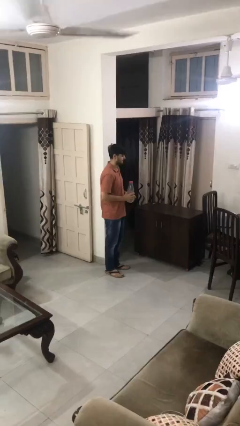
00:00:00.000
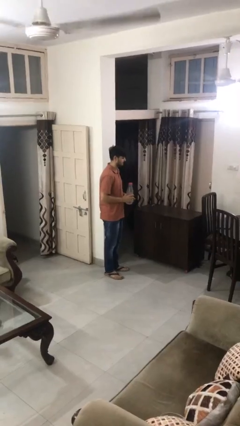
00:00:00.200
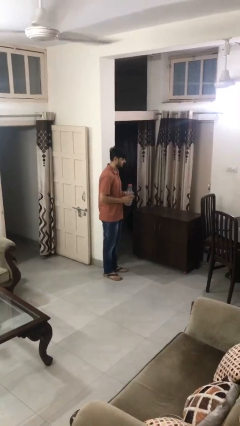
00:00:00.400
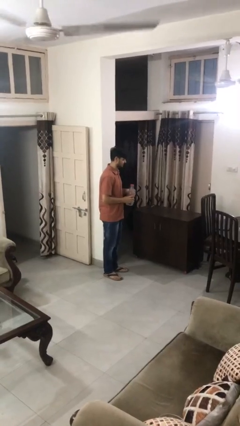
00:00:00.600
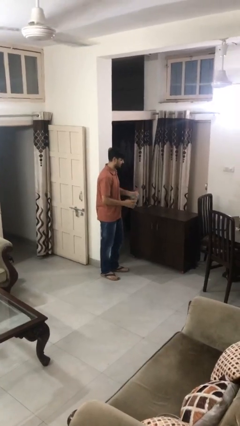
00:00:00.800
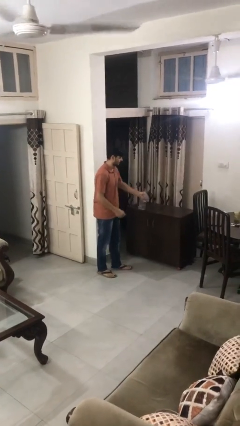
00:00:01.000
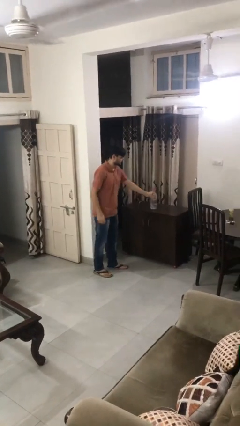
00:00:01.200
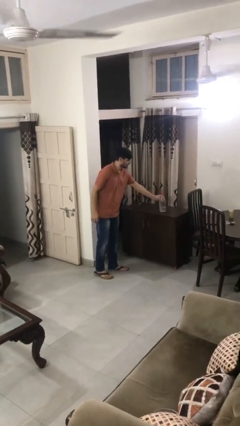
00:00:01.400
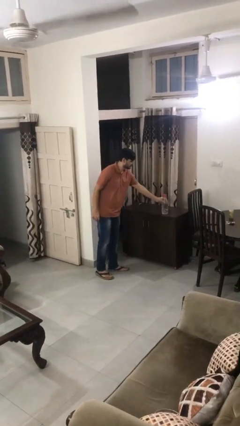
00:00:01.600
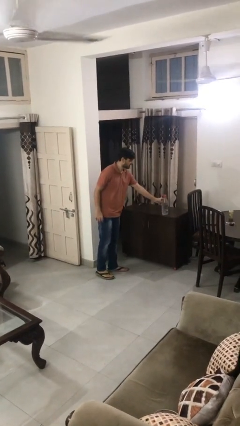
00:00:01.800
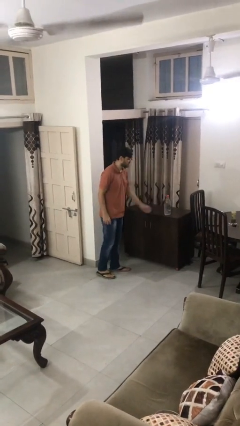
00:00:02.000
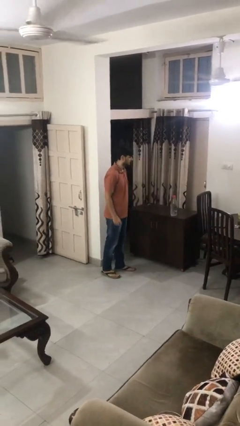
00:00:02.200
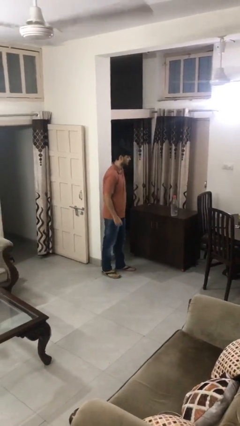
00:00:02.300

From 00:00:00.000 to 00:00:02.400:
person puts down object on countertop

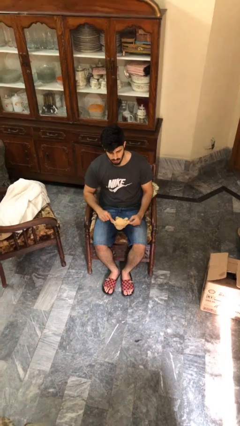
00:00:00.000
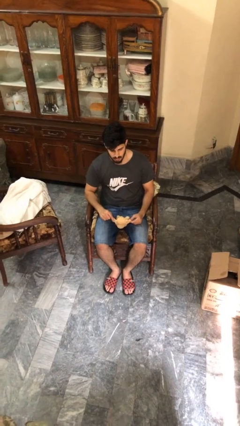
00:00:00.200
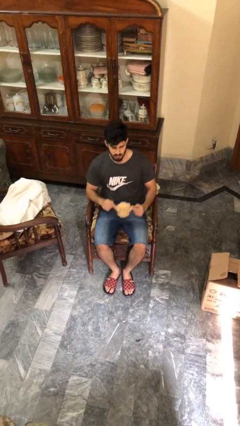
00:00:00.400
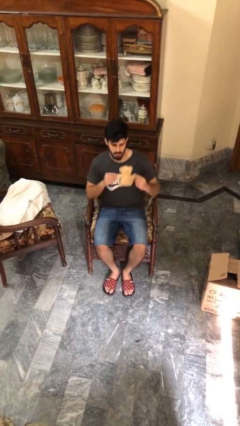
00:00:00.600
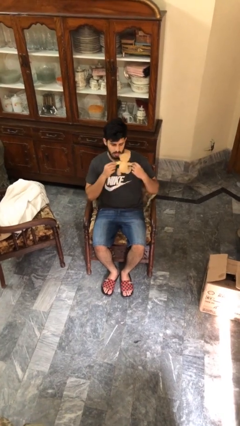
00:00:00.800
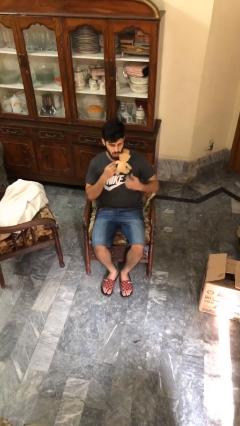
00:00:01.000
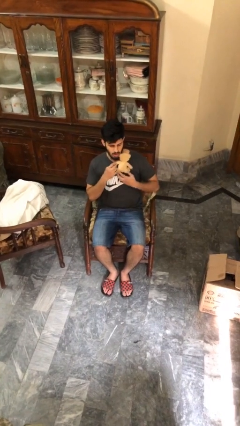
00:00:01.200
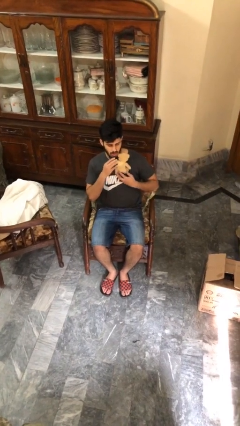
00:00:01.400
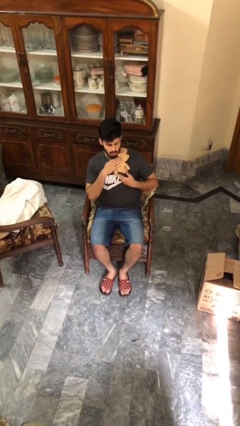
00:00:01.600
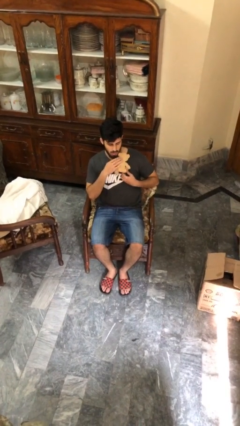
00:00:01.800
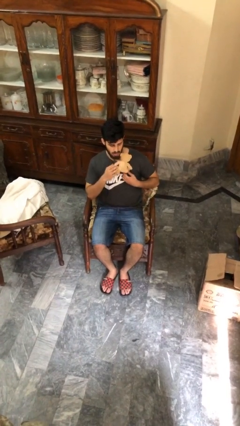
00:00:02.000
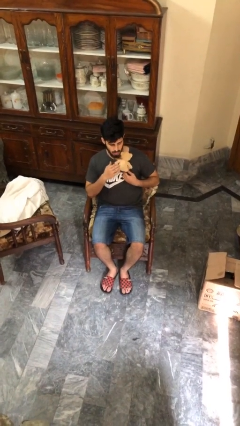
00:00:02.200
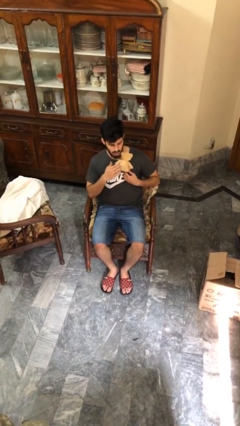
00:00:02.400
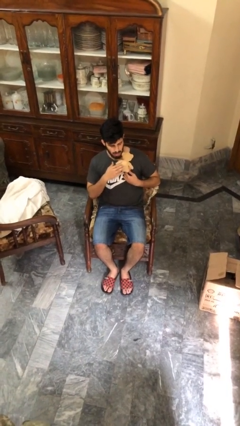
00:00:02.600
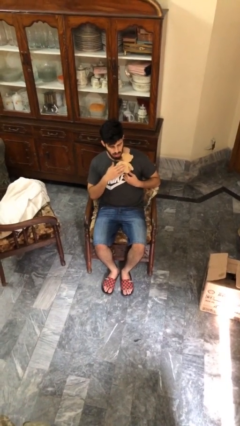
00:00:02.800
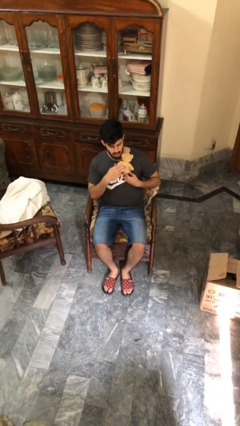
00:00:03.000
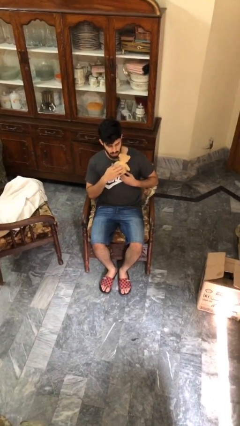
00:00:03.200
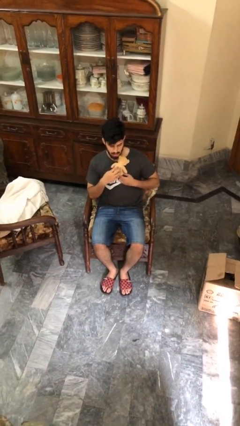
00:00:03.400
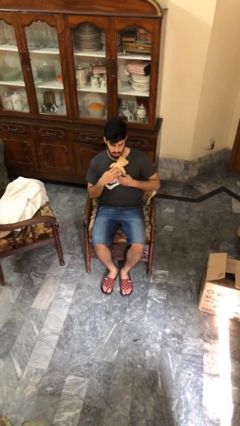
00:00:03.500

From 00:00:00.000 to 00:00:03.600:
person hugs stuffed animal

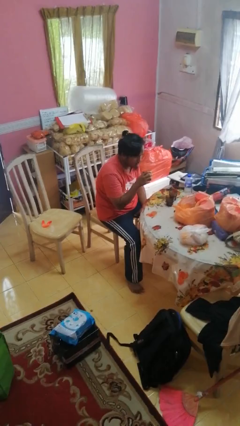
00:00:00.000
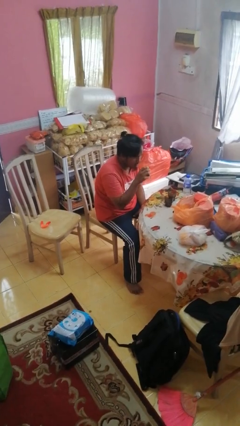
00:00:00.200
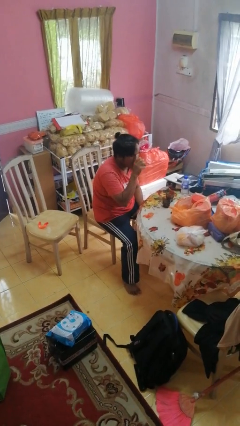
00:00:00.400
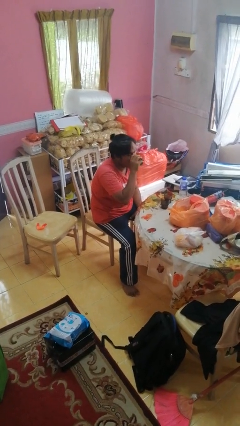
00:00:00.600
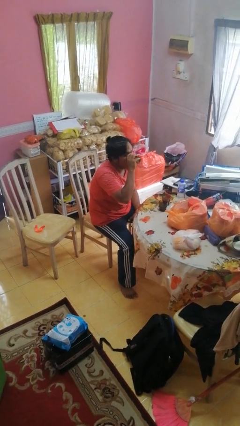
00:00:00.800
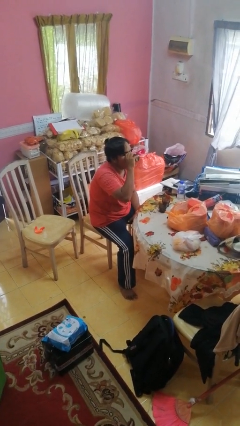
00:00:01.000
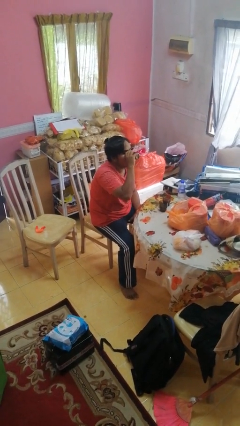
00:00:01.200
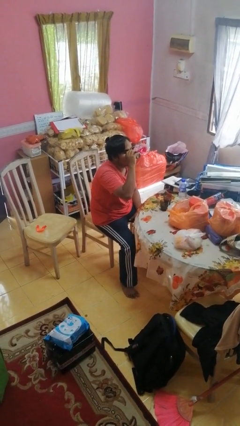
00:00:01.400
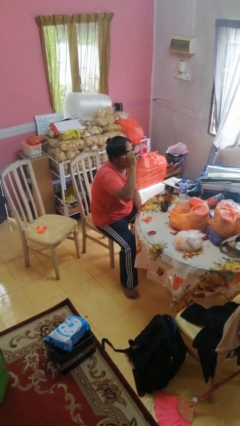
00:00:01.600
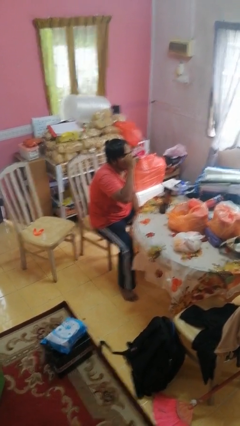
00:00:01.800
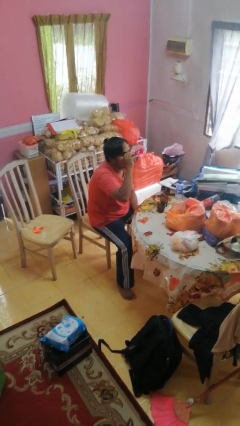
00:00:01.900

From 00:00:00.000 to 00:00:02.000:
person drinks from shotglass

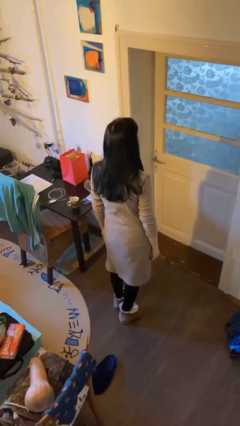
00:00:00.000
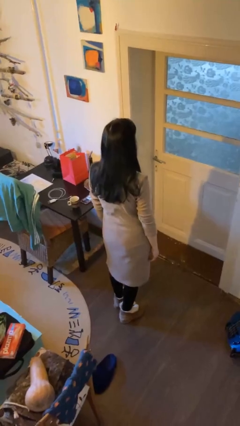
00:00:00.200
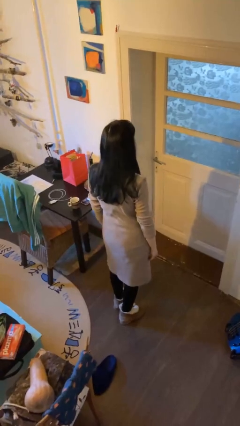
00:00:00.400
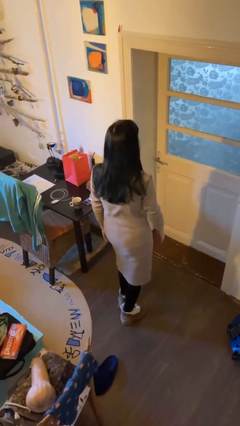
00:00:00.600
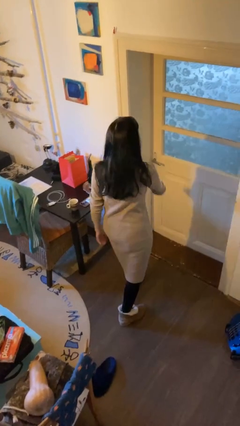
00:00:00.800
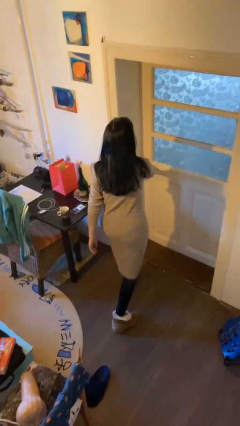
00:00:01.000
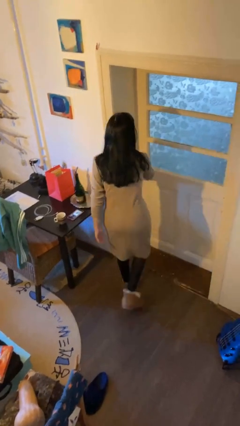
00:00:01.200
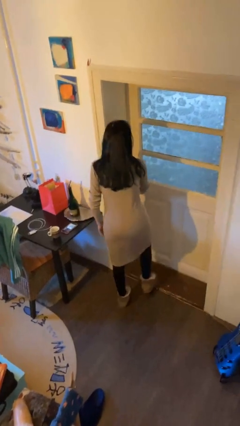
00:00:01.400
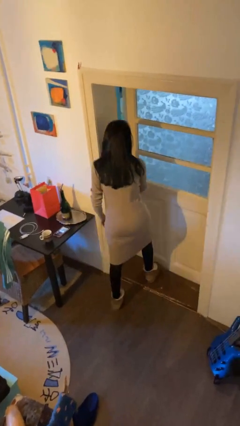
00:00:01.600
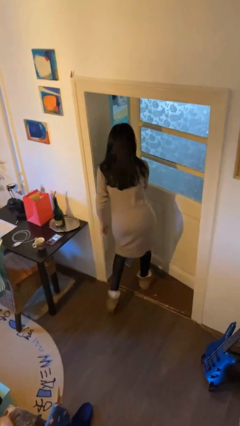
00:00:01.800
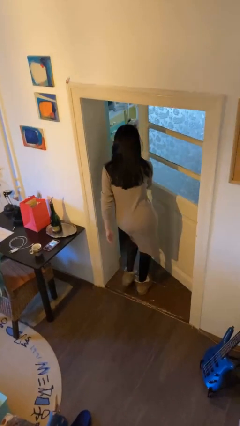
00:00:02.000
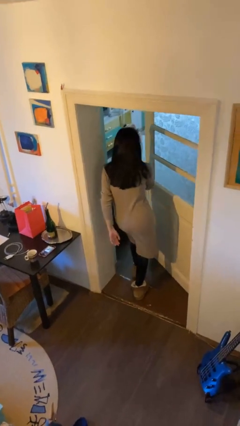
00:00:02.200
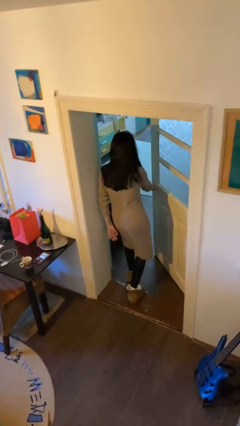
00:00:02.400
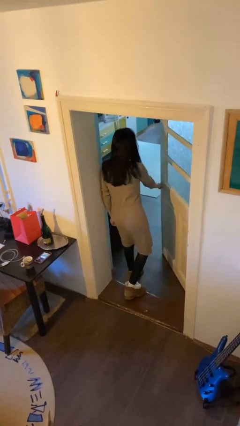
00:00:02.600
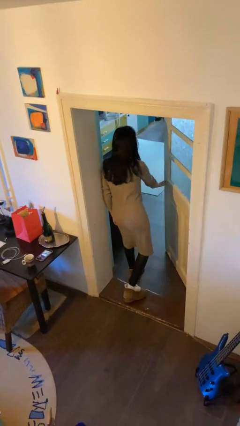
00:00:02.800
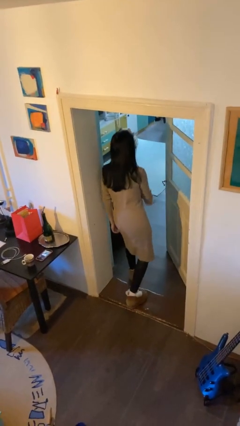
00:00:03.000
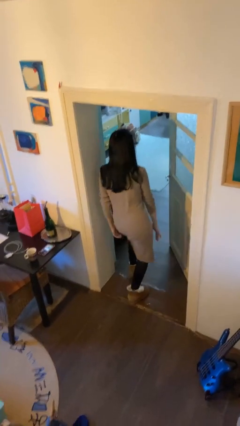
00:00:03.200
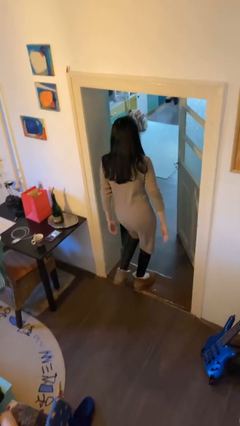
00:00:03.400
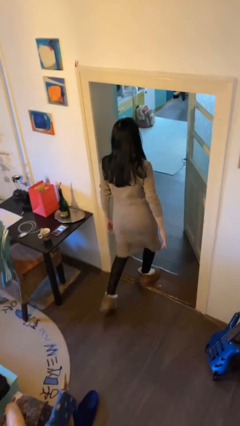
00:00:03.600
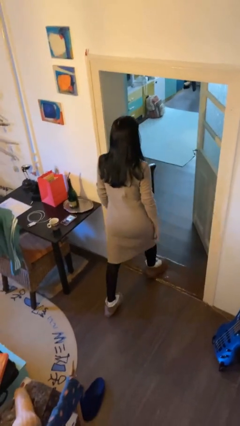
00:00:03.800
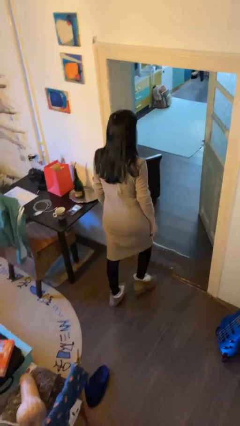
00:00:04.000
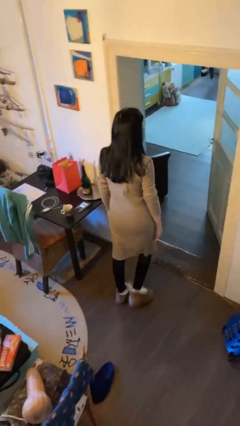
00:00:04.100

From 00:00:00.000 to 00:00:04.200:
person opens facility door

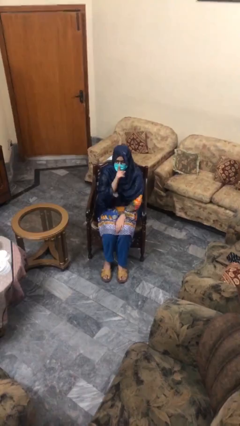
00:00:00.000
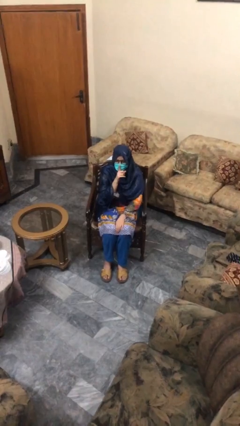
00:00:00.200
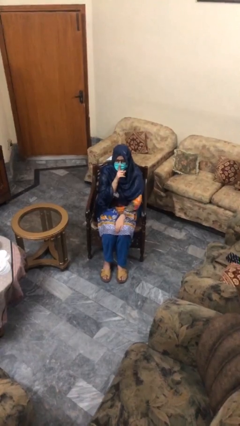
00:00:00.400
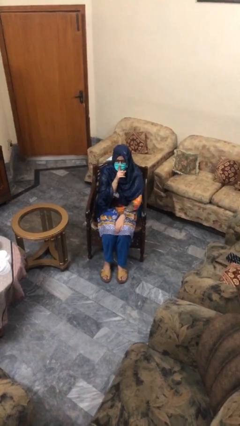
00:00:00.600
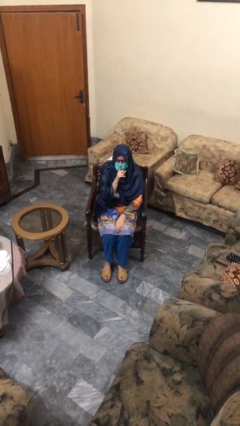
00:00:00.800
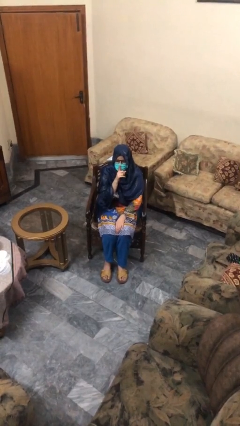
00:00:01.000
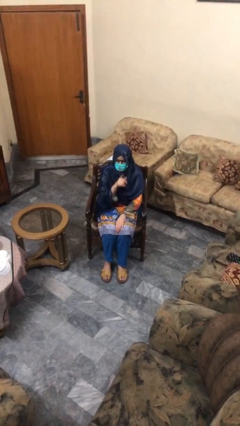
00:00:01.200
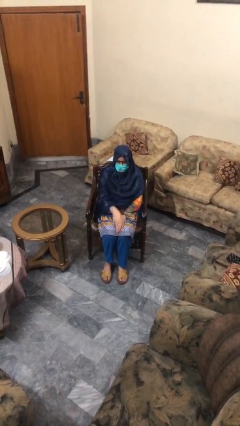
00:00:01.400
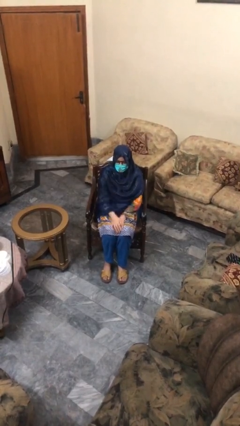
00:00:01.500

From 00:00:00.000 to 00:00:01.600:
person gestures be quiet

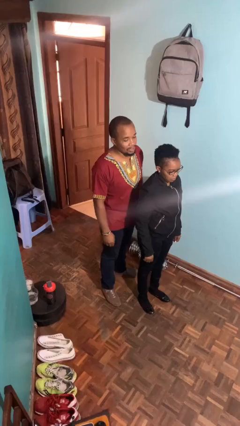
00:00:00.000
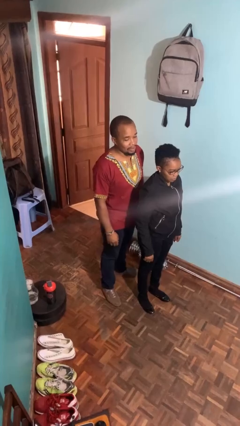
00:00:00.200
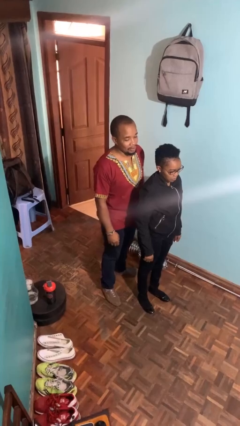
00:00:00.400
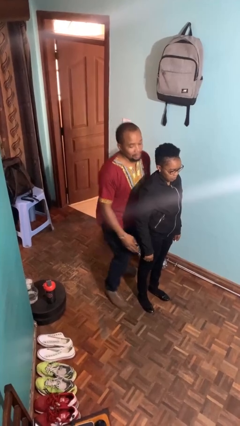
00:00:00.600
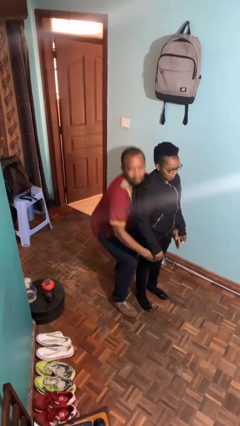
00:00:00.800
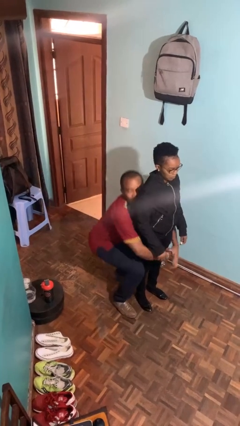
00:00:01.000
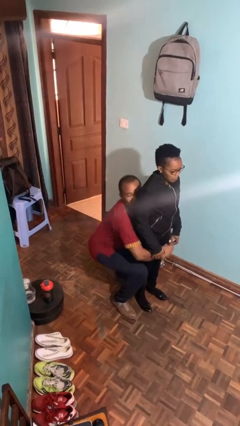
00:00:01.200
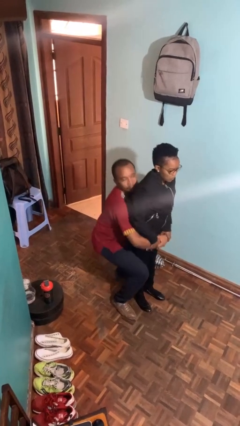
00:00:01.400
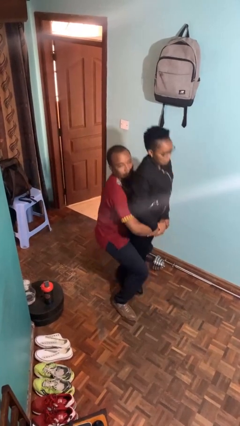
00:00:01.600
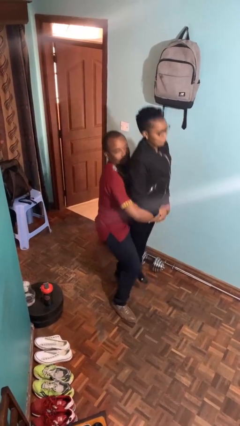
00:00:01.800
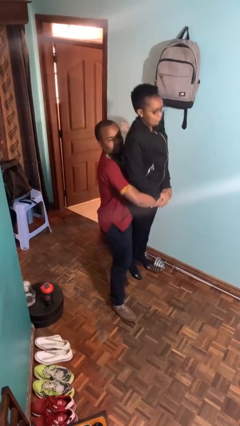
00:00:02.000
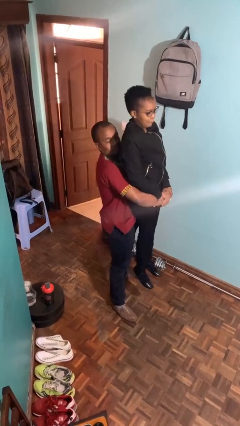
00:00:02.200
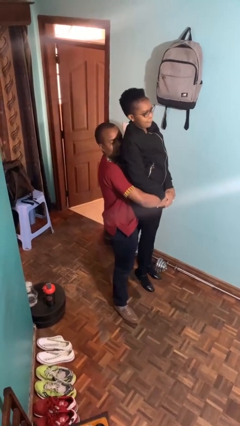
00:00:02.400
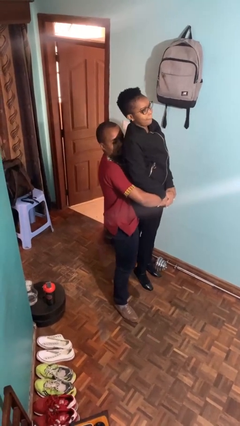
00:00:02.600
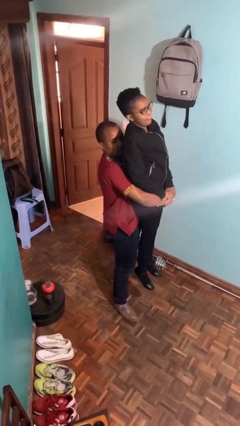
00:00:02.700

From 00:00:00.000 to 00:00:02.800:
person picks up person

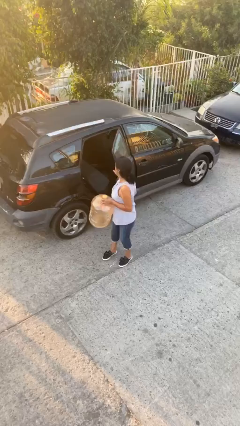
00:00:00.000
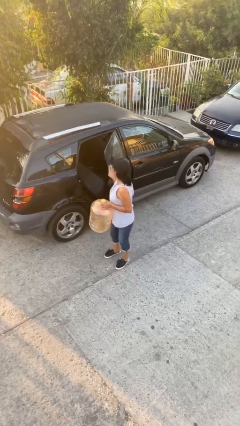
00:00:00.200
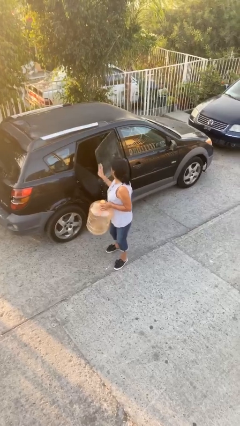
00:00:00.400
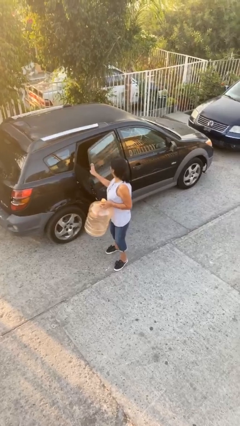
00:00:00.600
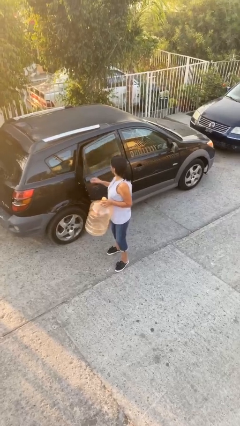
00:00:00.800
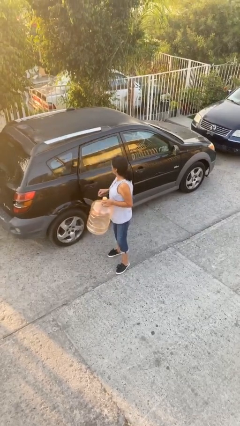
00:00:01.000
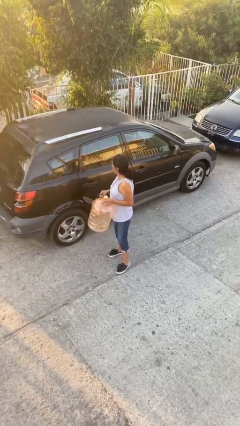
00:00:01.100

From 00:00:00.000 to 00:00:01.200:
person closes car door
